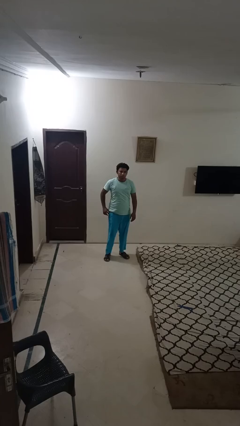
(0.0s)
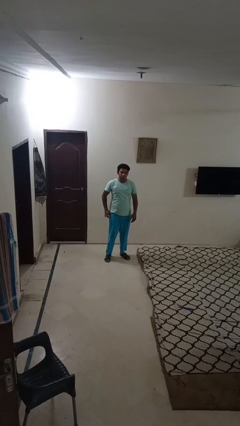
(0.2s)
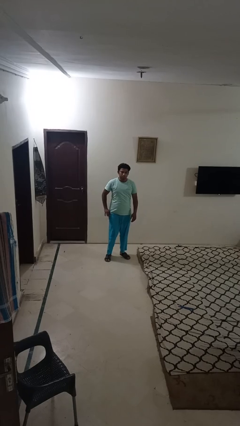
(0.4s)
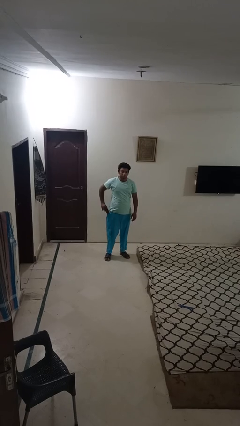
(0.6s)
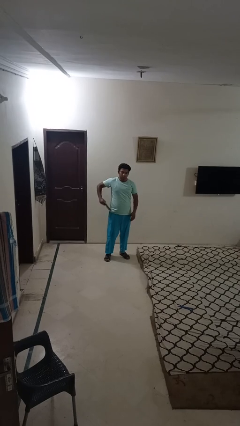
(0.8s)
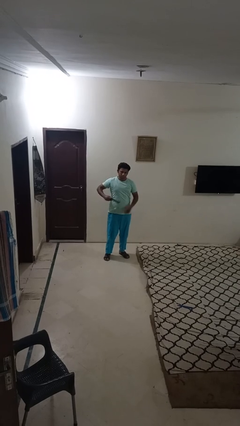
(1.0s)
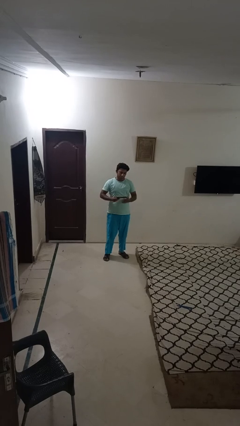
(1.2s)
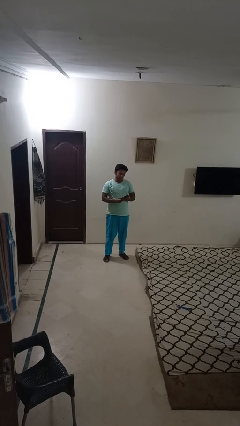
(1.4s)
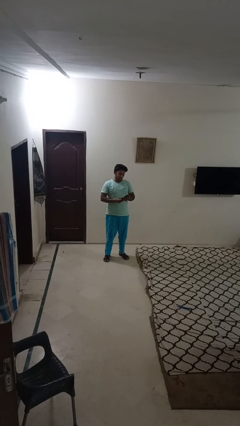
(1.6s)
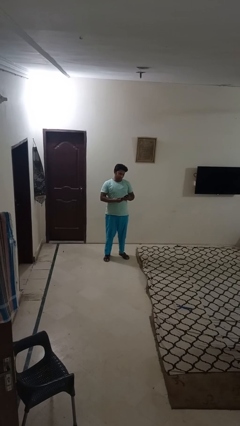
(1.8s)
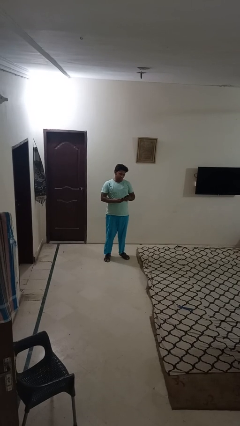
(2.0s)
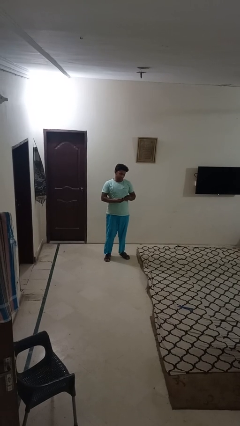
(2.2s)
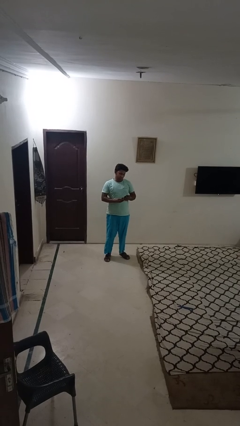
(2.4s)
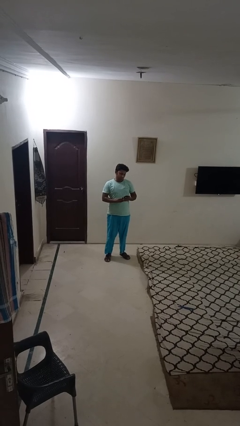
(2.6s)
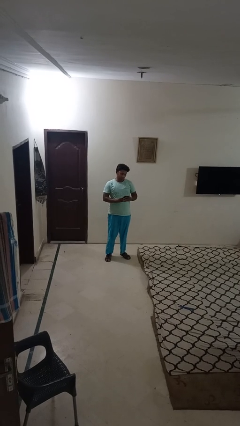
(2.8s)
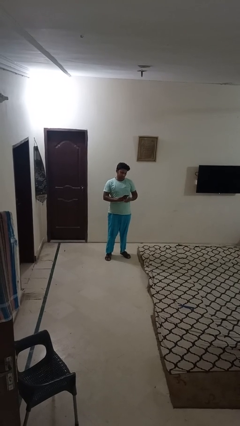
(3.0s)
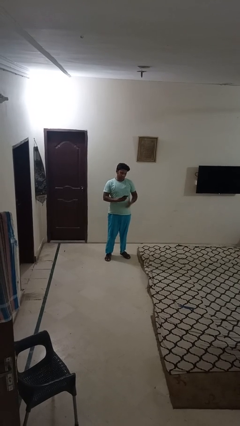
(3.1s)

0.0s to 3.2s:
person takes phone from pocket

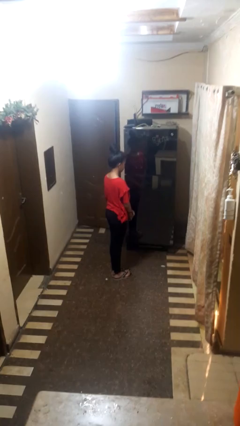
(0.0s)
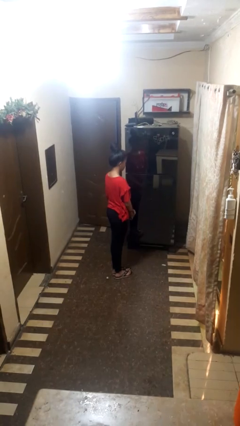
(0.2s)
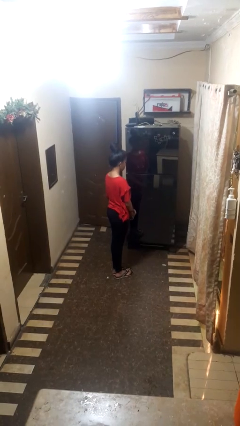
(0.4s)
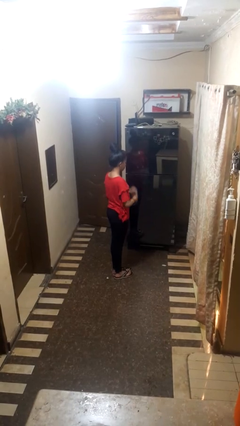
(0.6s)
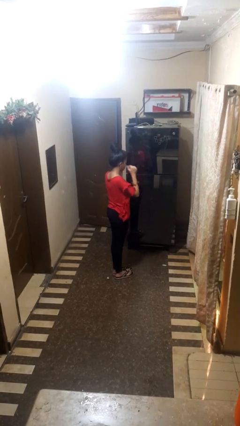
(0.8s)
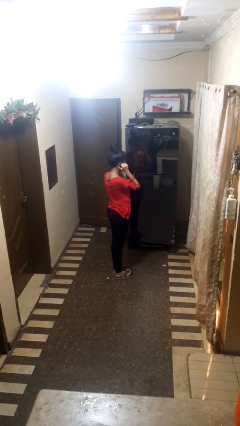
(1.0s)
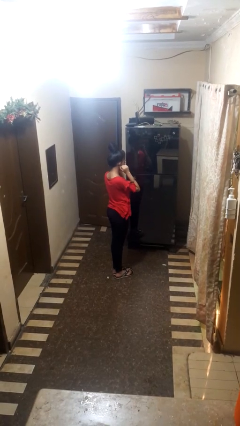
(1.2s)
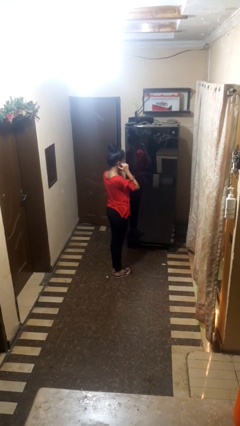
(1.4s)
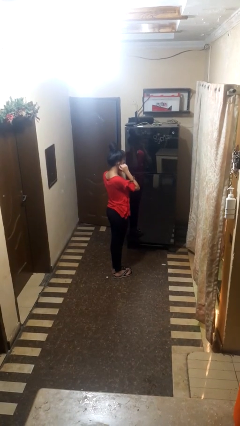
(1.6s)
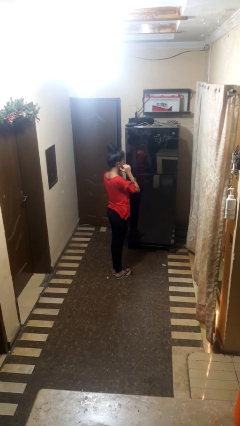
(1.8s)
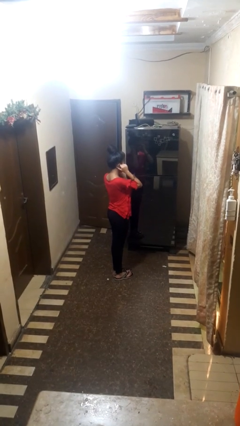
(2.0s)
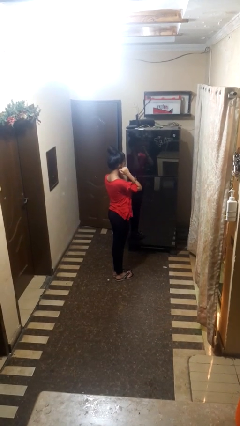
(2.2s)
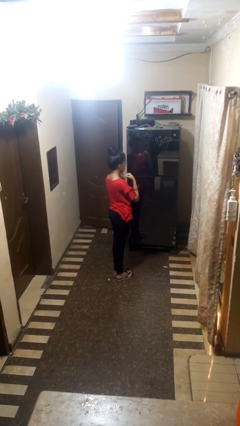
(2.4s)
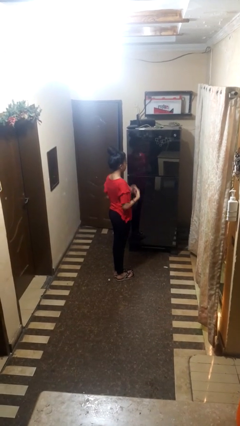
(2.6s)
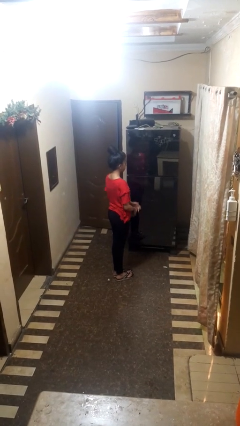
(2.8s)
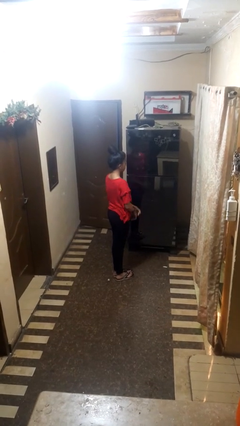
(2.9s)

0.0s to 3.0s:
person touches earlobe

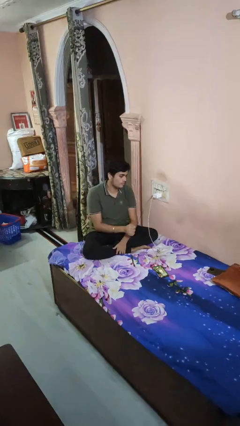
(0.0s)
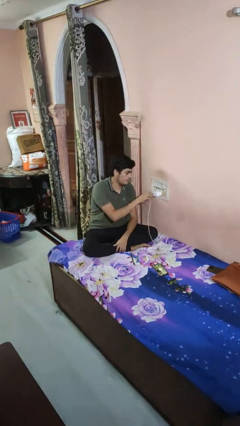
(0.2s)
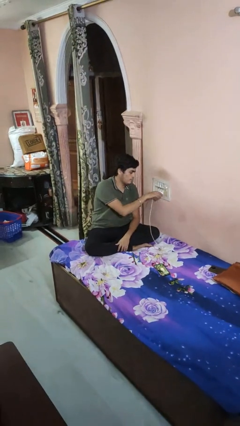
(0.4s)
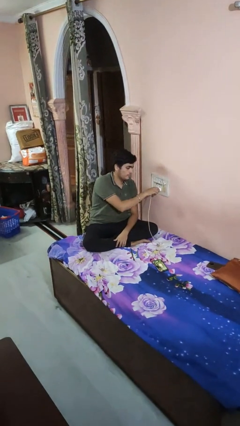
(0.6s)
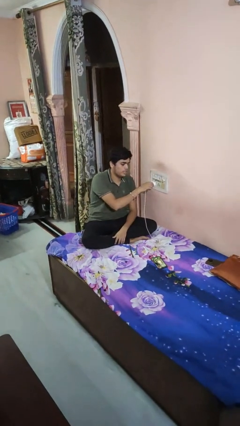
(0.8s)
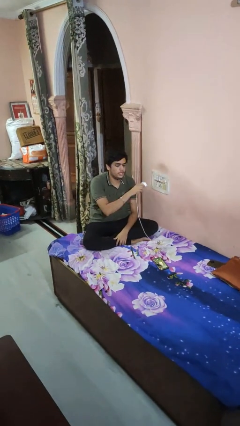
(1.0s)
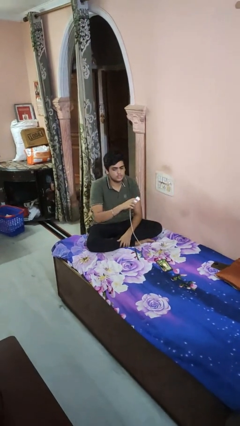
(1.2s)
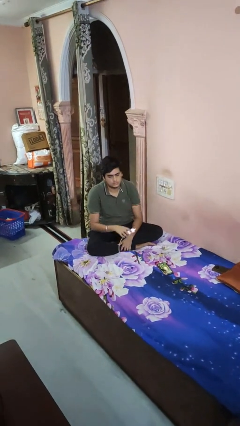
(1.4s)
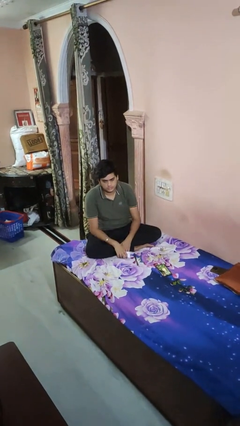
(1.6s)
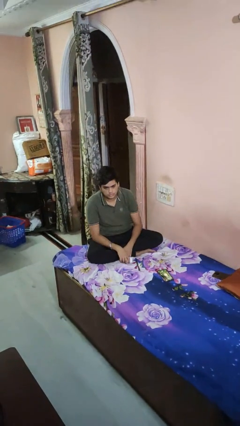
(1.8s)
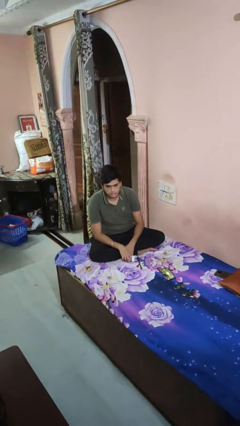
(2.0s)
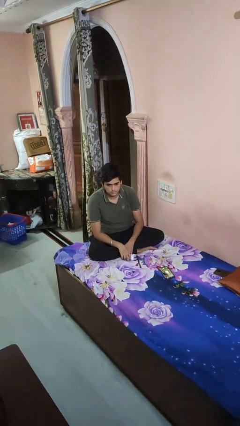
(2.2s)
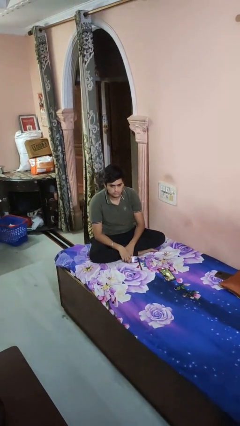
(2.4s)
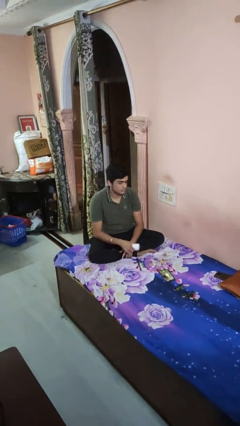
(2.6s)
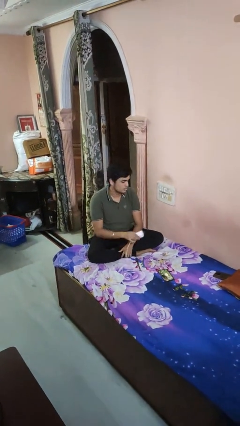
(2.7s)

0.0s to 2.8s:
person unplugs from electrical socket

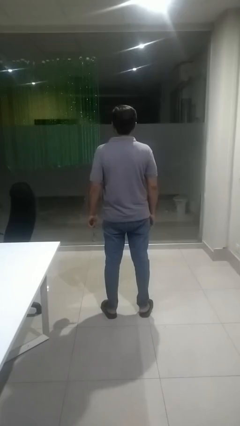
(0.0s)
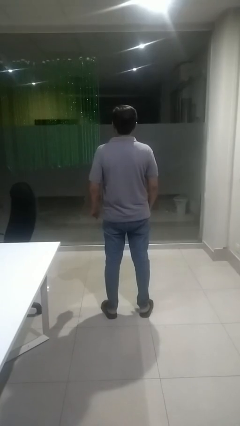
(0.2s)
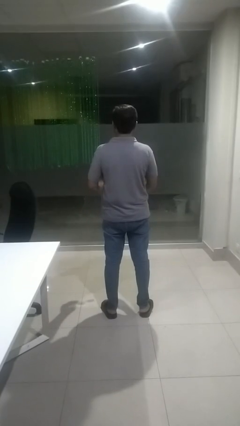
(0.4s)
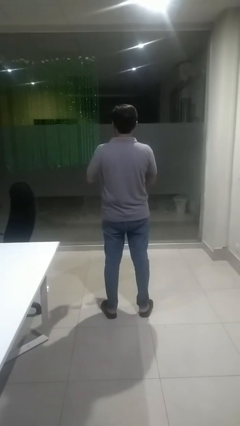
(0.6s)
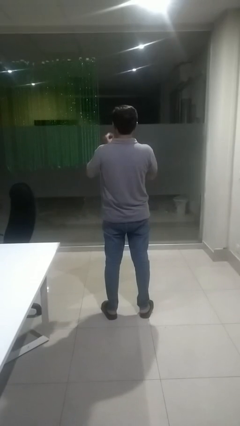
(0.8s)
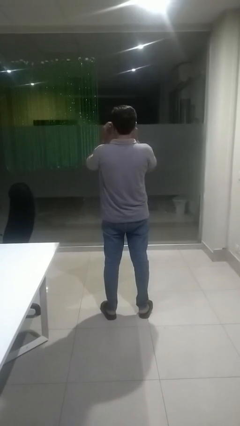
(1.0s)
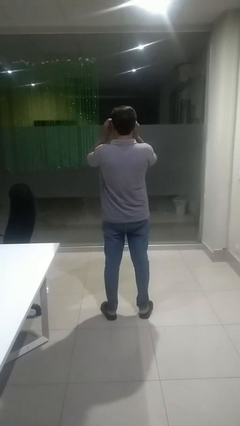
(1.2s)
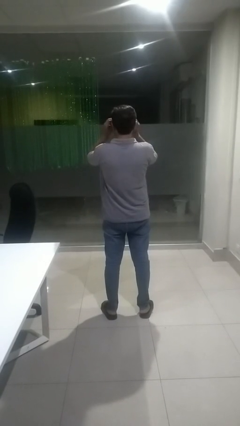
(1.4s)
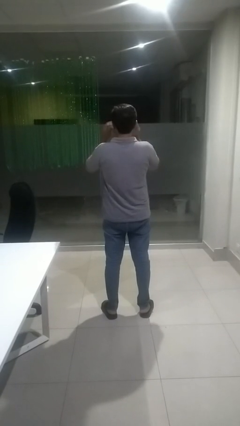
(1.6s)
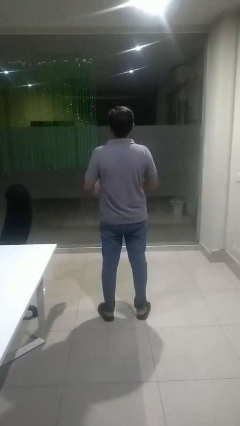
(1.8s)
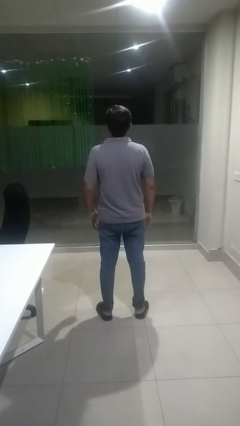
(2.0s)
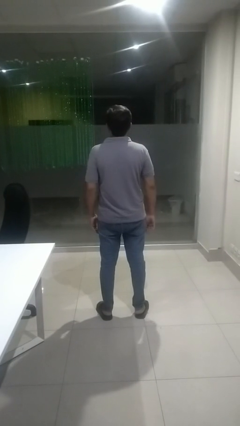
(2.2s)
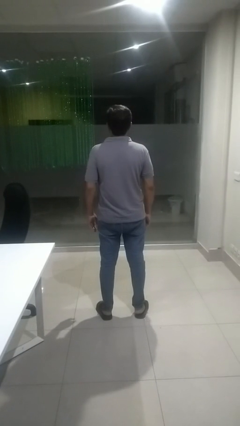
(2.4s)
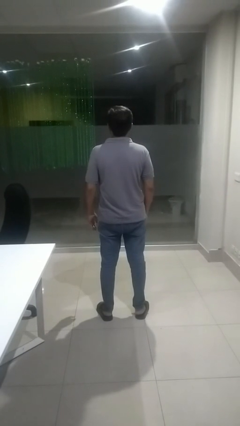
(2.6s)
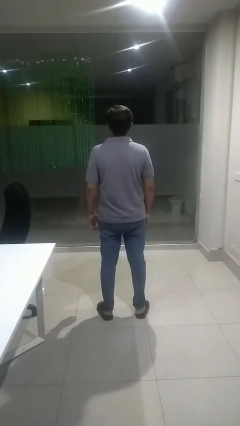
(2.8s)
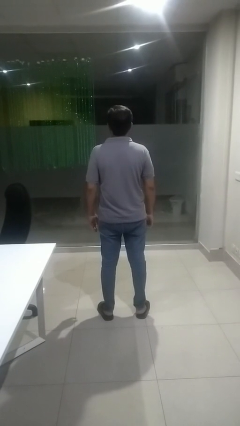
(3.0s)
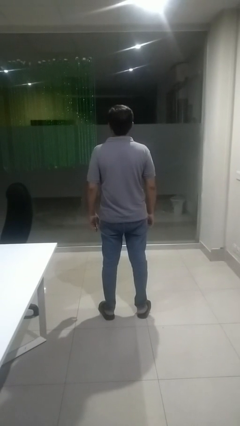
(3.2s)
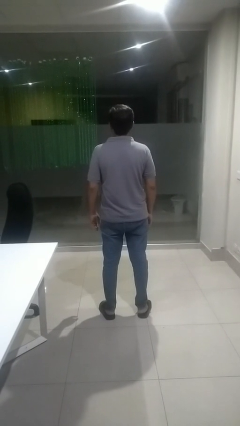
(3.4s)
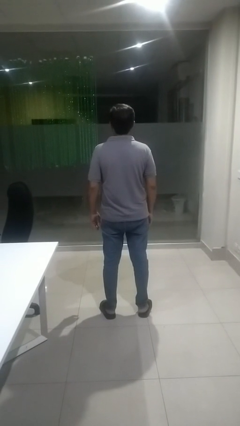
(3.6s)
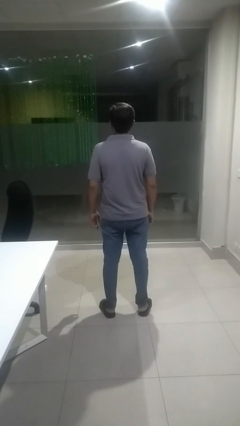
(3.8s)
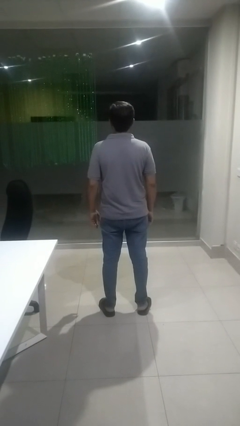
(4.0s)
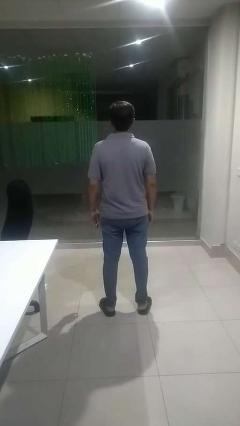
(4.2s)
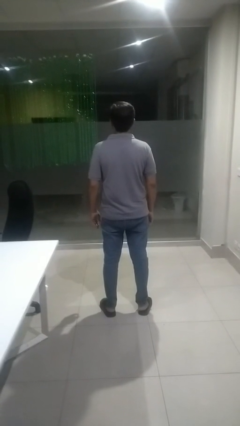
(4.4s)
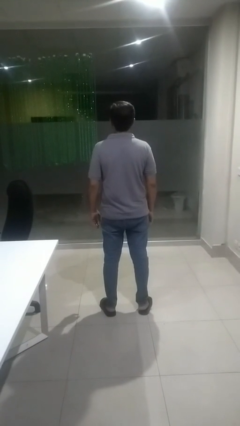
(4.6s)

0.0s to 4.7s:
person puts on glasses

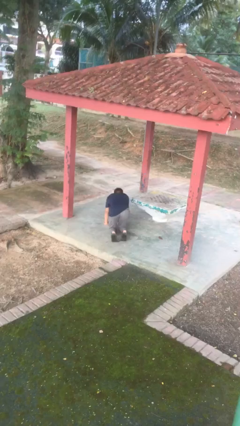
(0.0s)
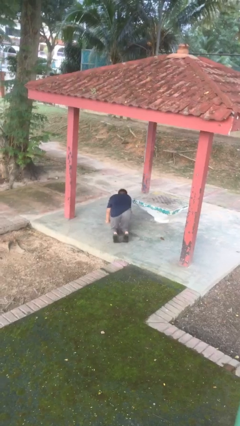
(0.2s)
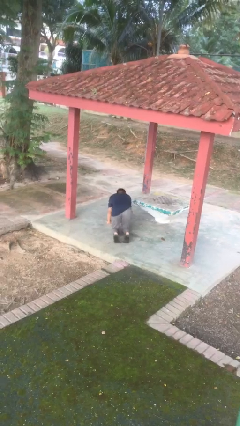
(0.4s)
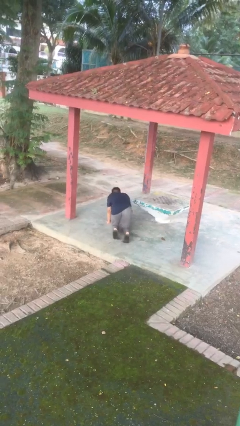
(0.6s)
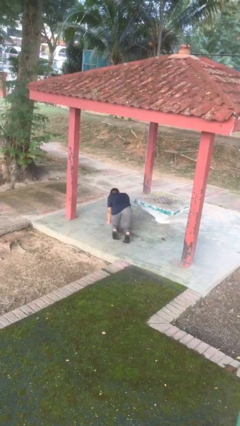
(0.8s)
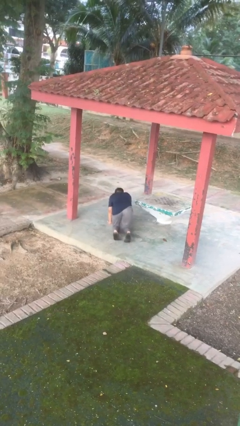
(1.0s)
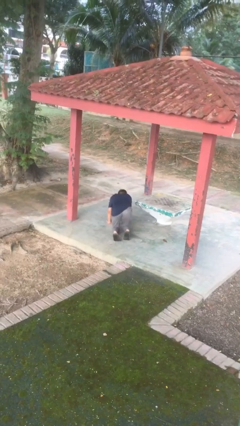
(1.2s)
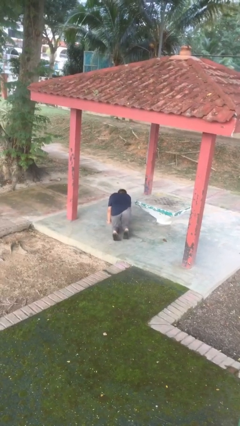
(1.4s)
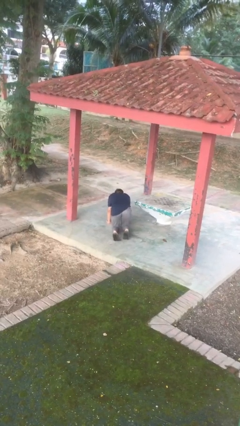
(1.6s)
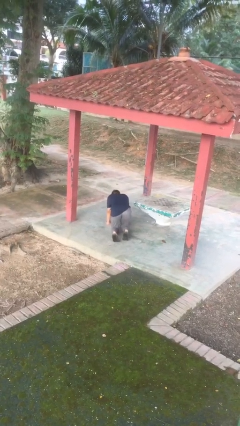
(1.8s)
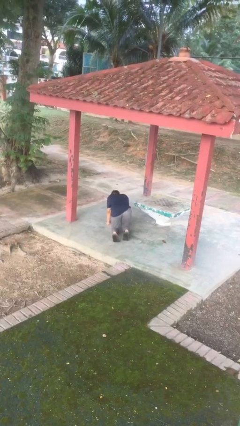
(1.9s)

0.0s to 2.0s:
person crawls

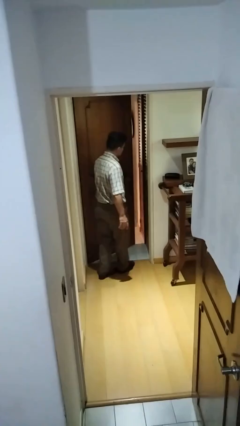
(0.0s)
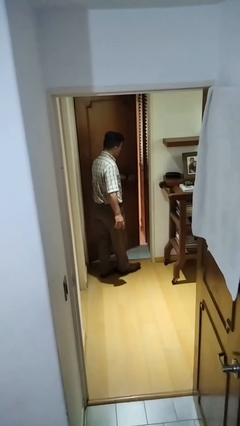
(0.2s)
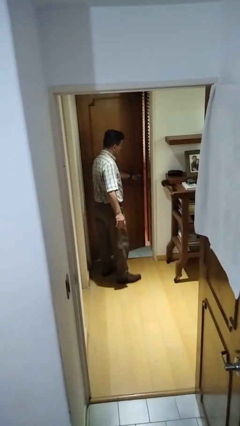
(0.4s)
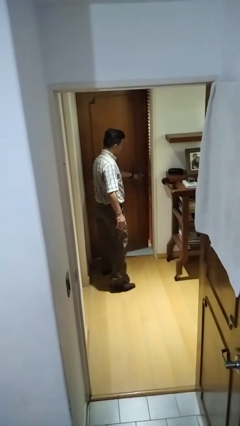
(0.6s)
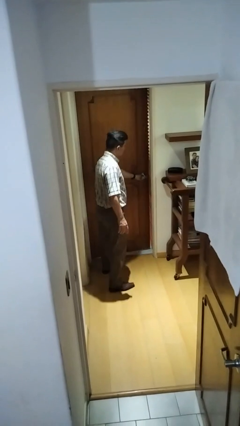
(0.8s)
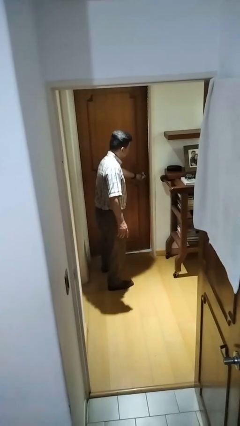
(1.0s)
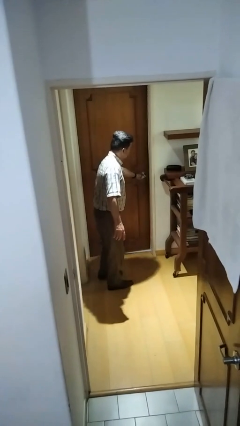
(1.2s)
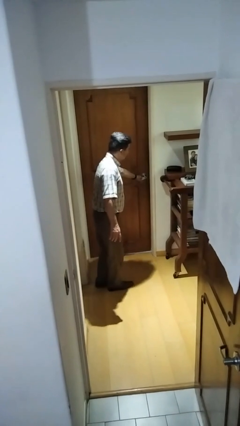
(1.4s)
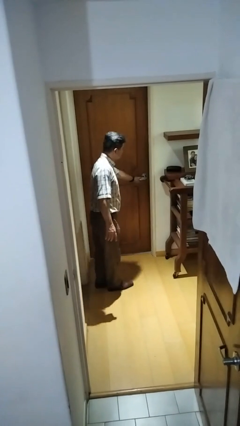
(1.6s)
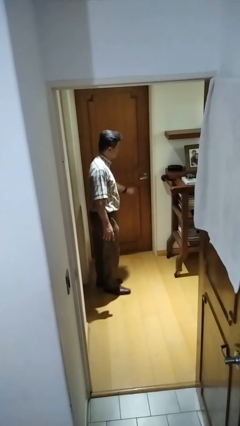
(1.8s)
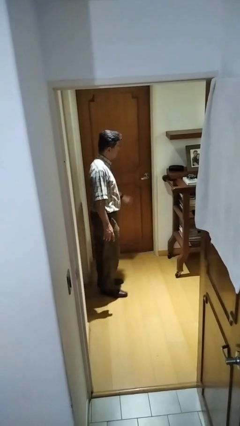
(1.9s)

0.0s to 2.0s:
person closes facility door

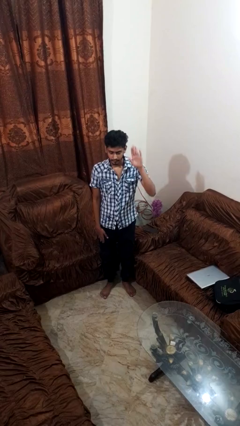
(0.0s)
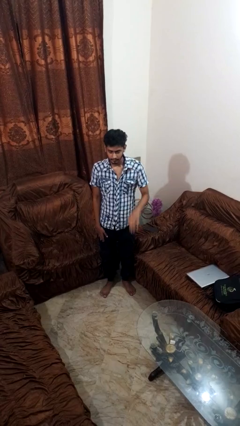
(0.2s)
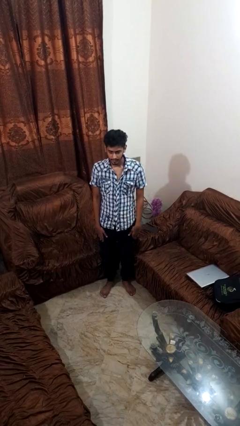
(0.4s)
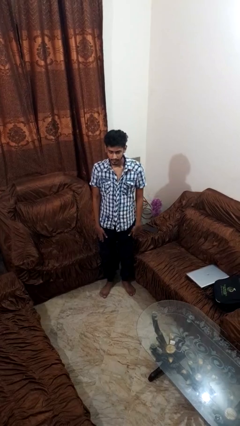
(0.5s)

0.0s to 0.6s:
person gestures lower hand
